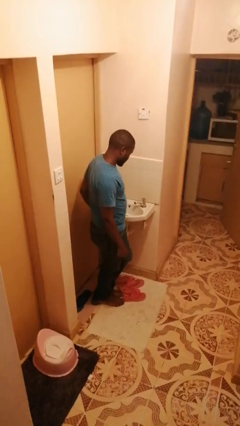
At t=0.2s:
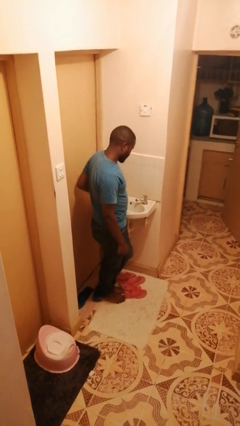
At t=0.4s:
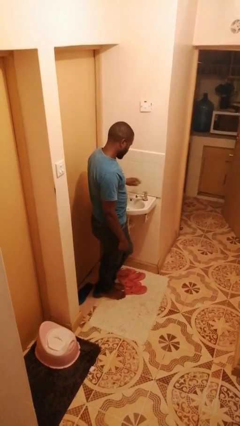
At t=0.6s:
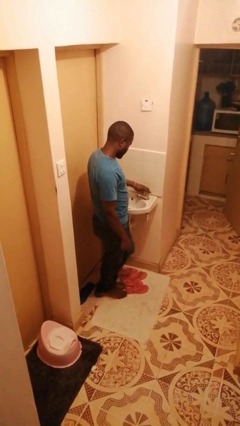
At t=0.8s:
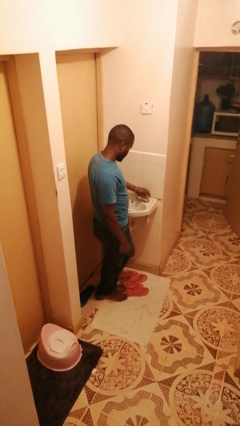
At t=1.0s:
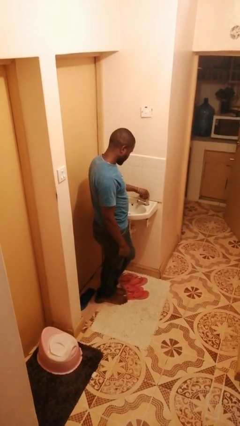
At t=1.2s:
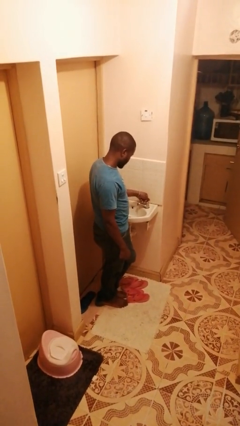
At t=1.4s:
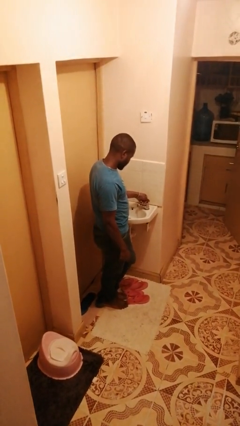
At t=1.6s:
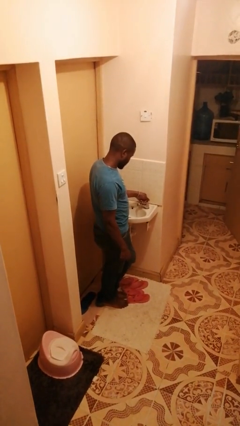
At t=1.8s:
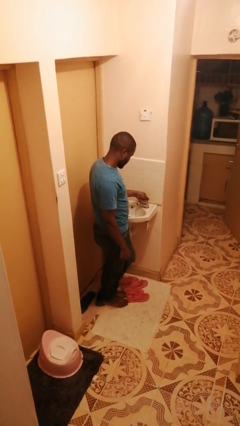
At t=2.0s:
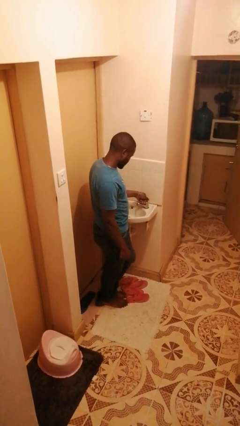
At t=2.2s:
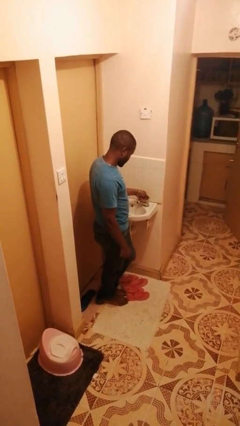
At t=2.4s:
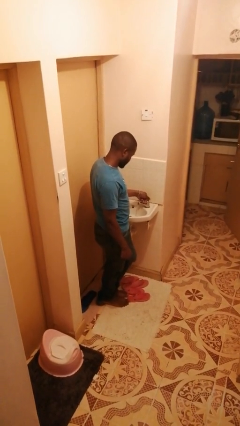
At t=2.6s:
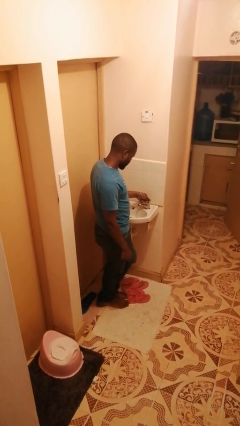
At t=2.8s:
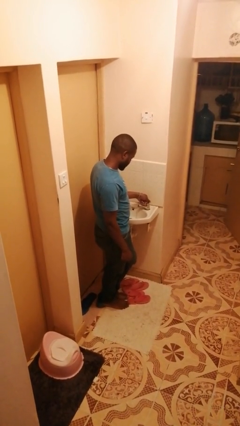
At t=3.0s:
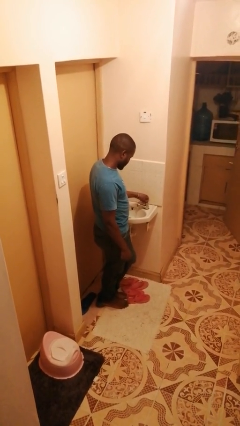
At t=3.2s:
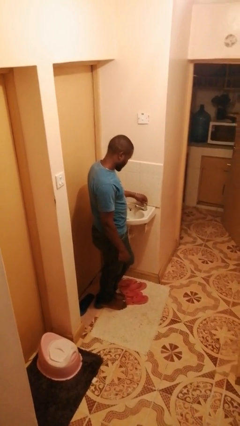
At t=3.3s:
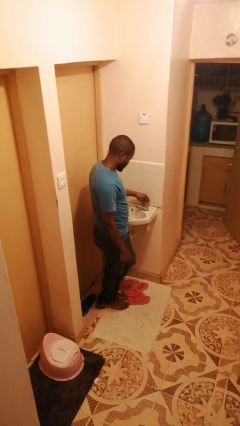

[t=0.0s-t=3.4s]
person turns on faucet

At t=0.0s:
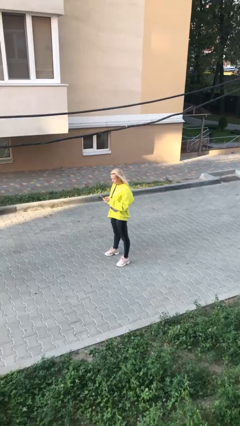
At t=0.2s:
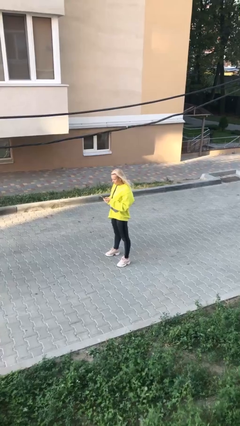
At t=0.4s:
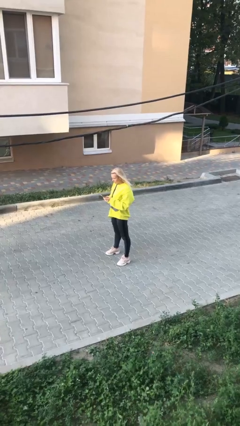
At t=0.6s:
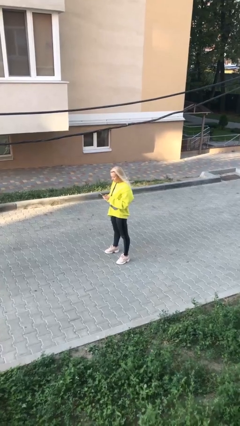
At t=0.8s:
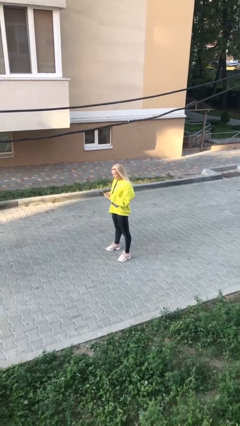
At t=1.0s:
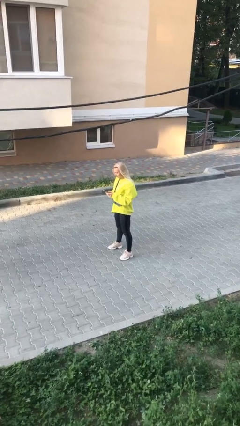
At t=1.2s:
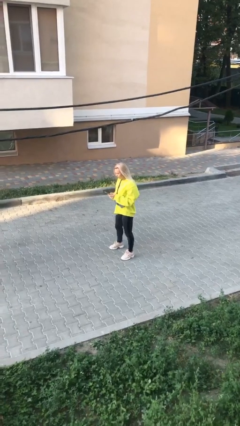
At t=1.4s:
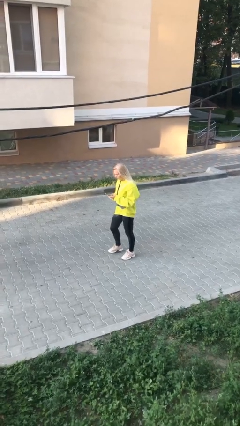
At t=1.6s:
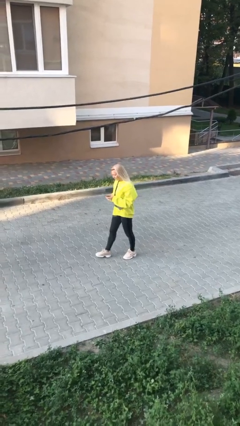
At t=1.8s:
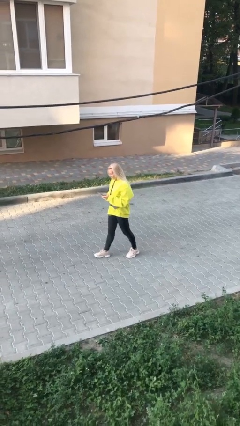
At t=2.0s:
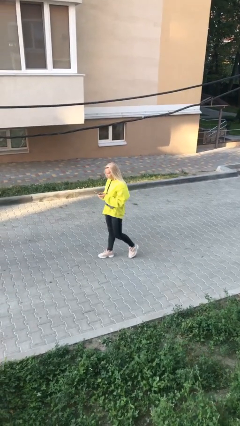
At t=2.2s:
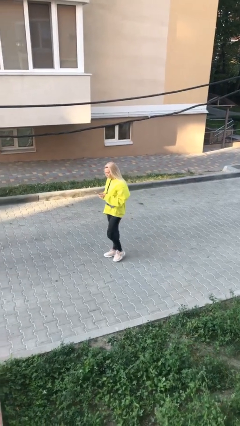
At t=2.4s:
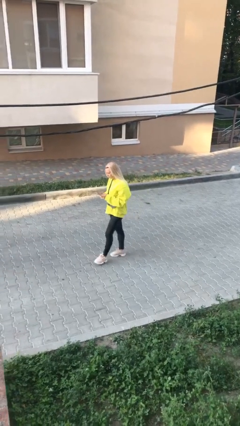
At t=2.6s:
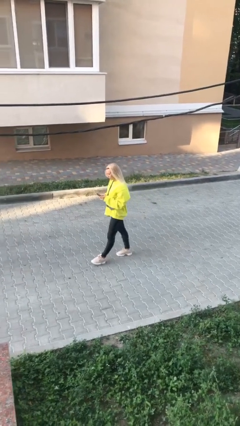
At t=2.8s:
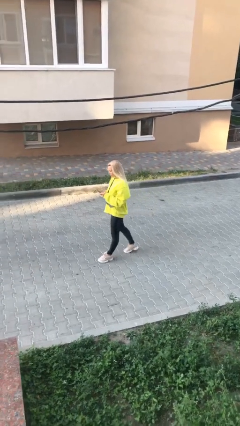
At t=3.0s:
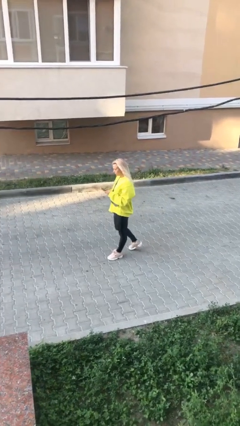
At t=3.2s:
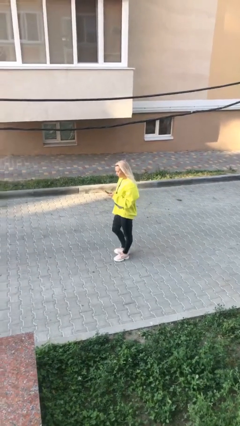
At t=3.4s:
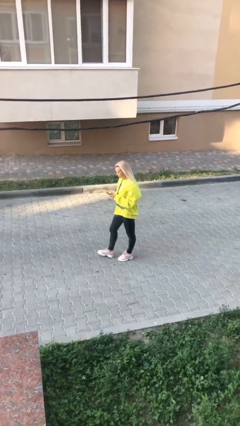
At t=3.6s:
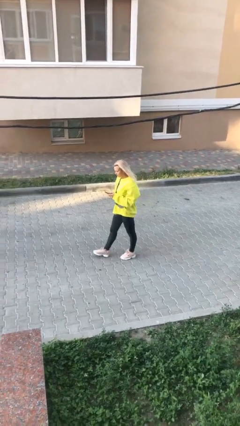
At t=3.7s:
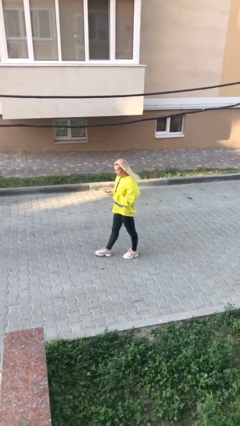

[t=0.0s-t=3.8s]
person texts on phone

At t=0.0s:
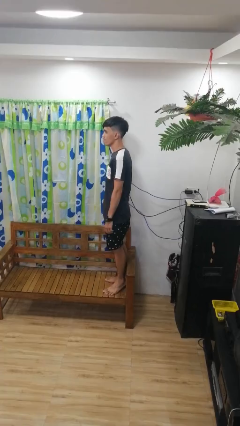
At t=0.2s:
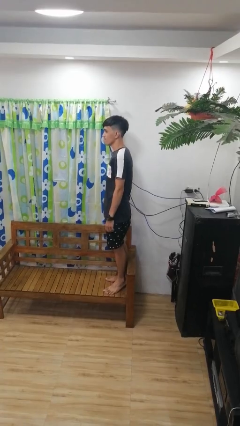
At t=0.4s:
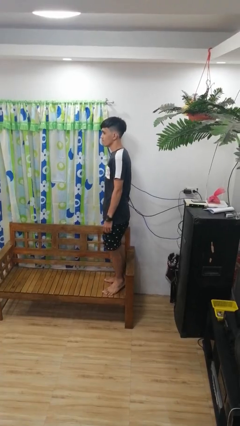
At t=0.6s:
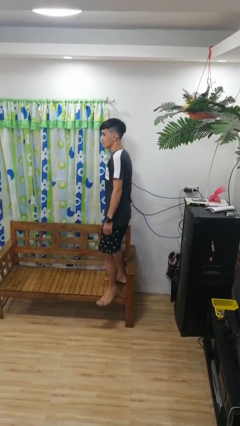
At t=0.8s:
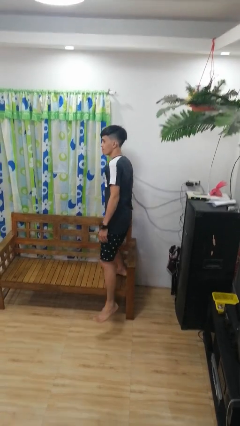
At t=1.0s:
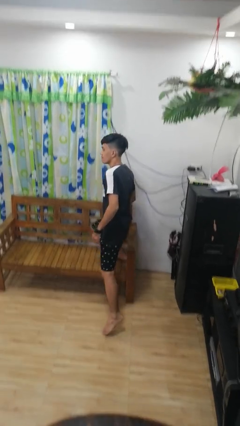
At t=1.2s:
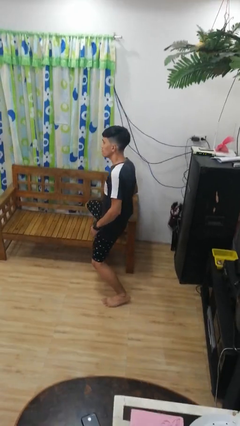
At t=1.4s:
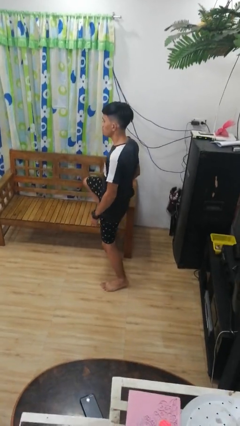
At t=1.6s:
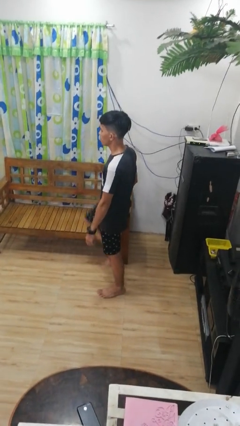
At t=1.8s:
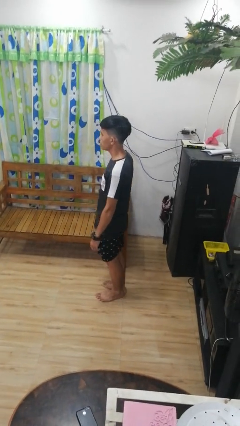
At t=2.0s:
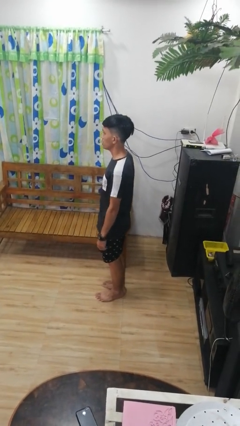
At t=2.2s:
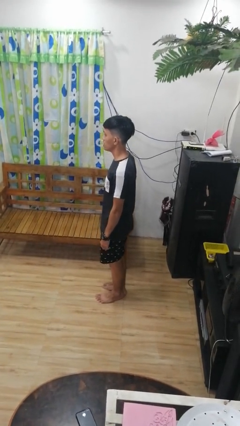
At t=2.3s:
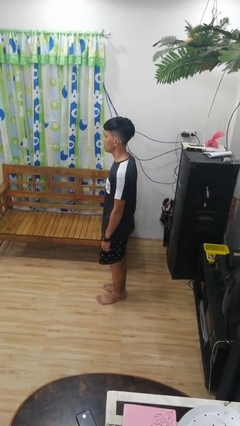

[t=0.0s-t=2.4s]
person climbs off couch

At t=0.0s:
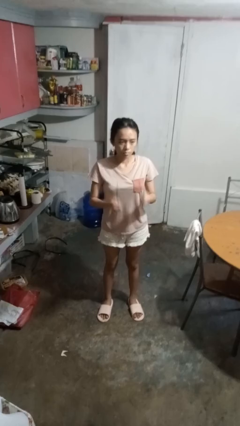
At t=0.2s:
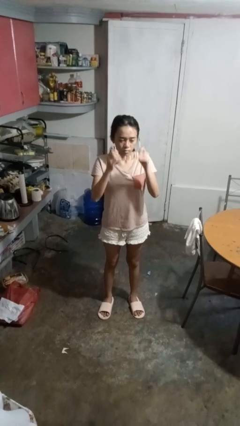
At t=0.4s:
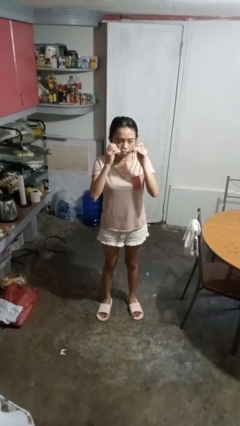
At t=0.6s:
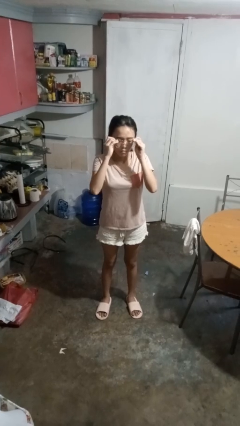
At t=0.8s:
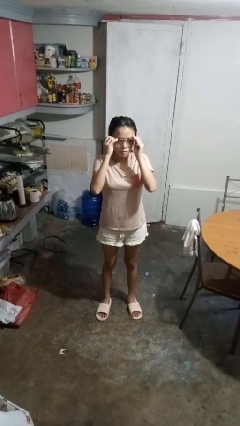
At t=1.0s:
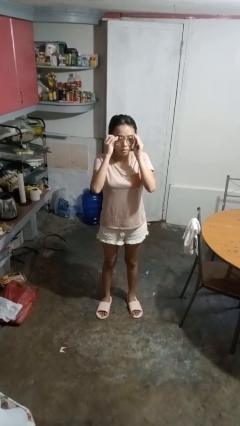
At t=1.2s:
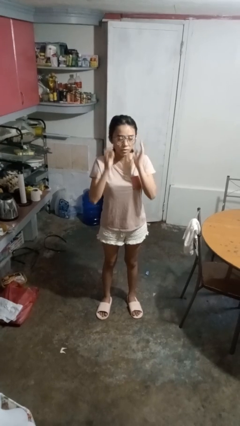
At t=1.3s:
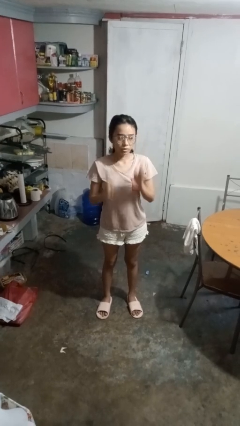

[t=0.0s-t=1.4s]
person puts on glasses

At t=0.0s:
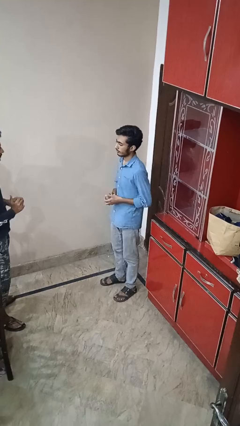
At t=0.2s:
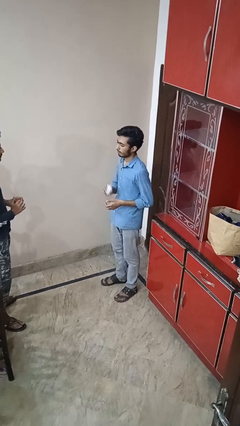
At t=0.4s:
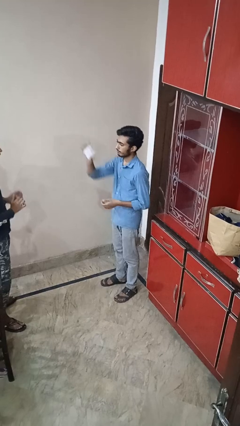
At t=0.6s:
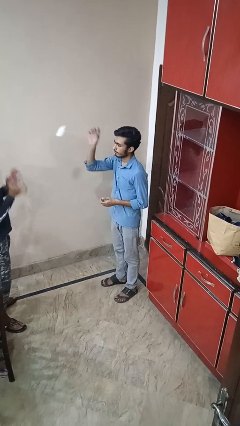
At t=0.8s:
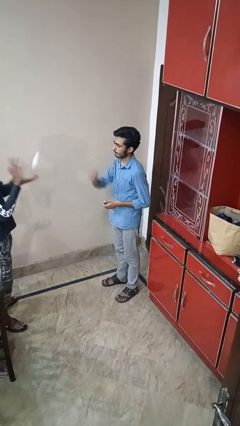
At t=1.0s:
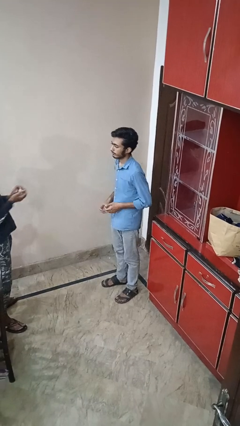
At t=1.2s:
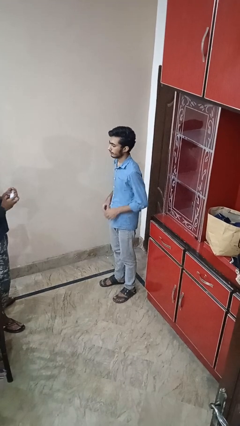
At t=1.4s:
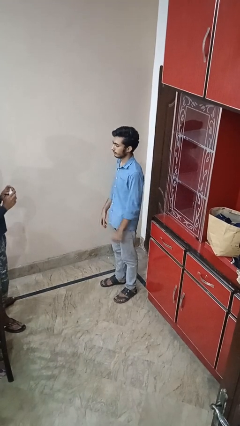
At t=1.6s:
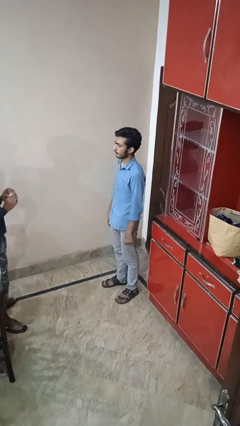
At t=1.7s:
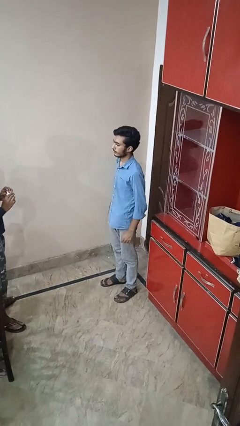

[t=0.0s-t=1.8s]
person throws object to person

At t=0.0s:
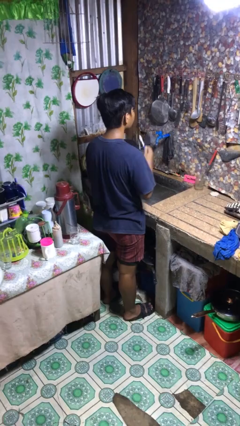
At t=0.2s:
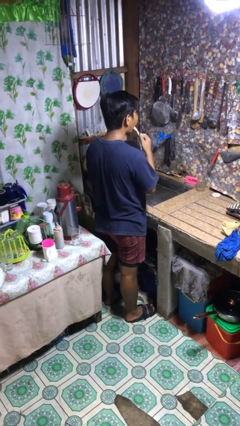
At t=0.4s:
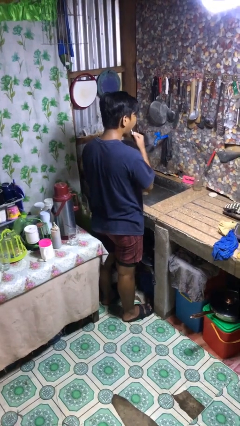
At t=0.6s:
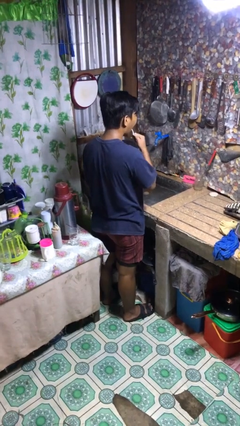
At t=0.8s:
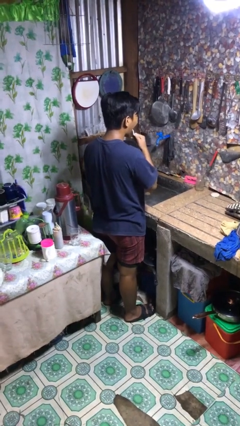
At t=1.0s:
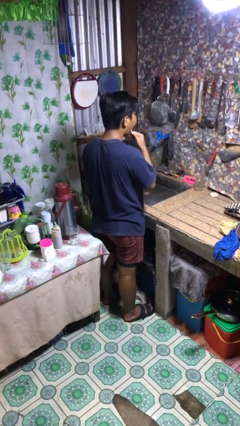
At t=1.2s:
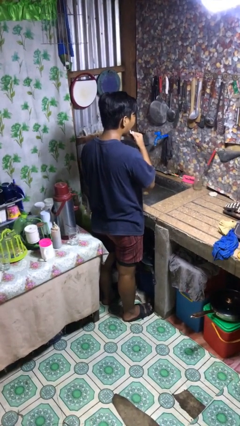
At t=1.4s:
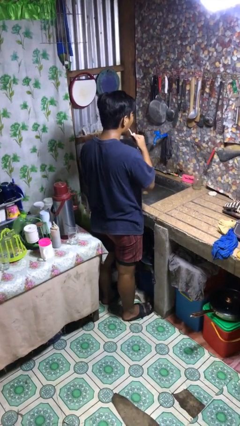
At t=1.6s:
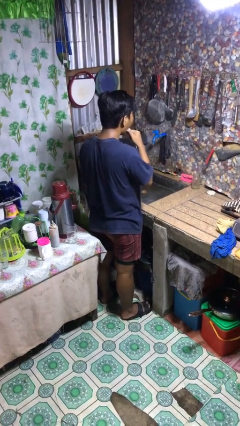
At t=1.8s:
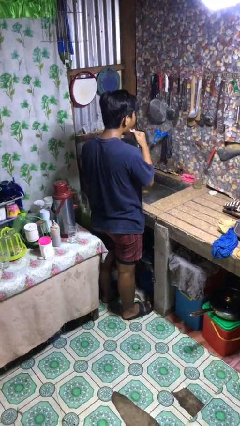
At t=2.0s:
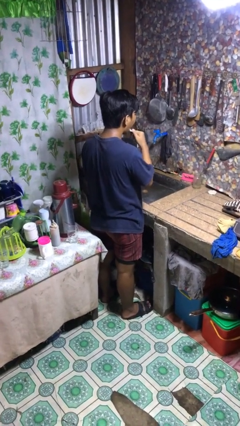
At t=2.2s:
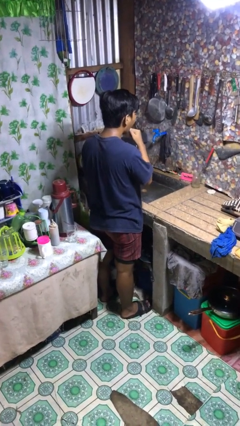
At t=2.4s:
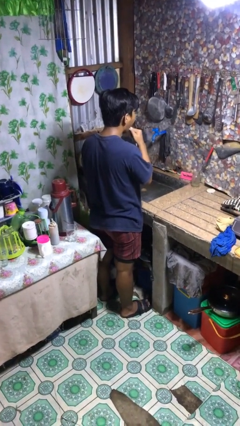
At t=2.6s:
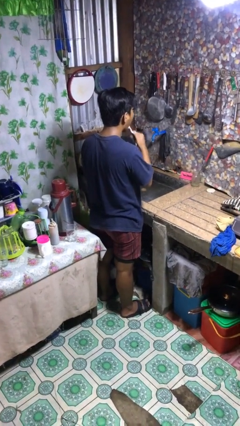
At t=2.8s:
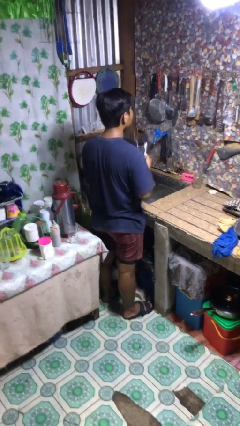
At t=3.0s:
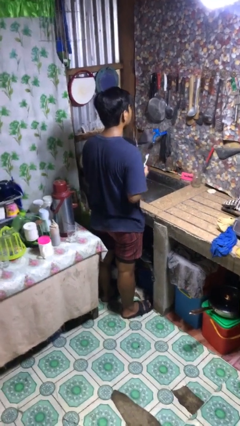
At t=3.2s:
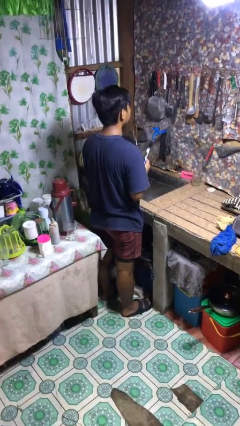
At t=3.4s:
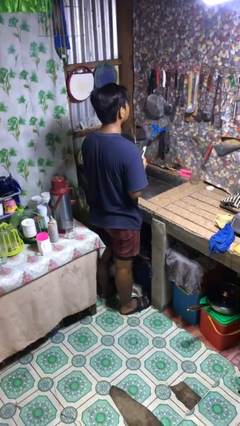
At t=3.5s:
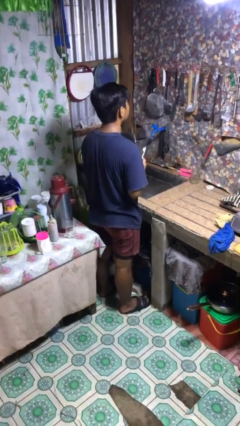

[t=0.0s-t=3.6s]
person brushes teeth

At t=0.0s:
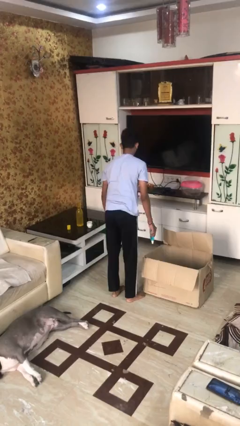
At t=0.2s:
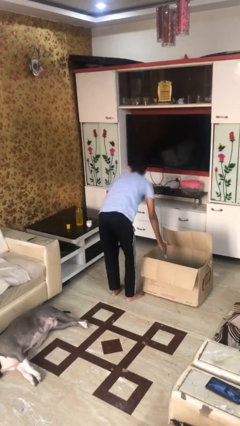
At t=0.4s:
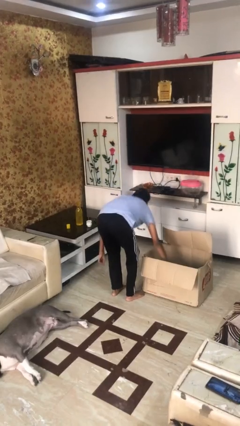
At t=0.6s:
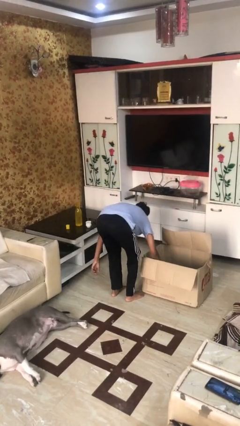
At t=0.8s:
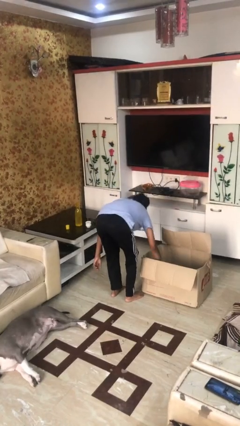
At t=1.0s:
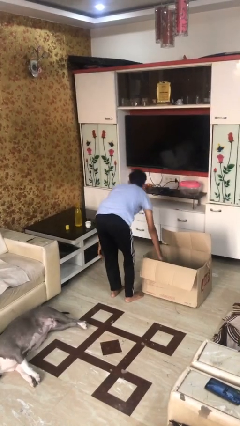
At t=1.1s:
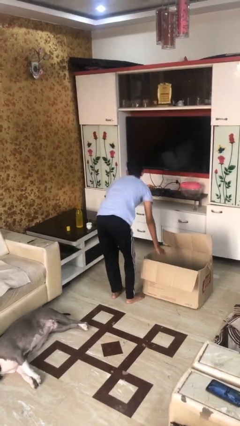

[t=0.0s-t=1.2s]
person puts object into box
